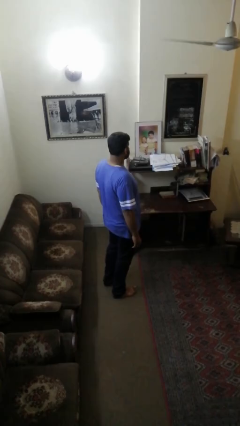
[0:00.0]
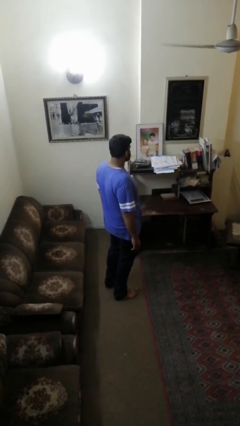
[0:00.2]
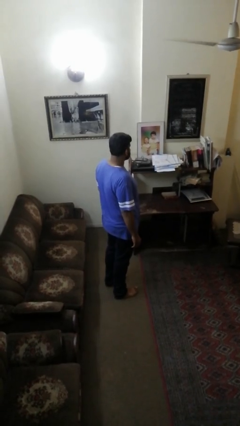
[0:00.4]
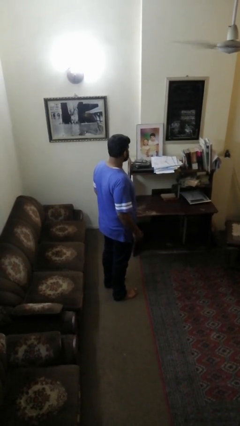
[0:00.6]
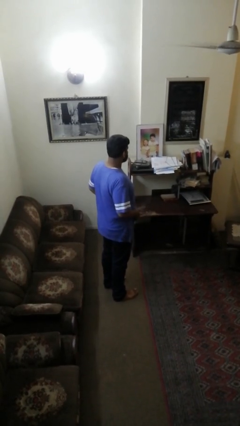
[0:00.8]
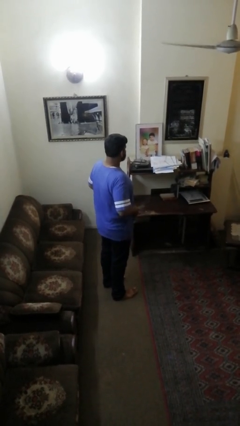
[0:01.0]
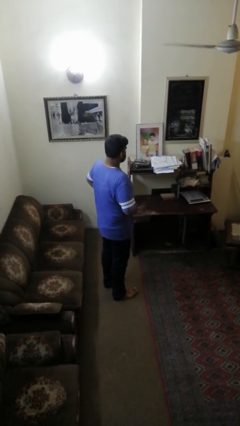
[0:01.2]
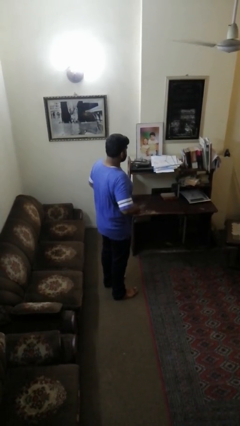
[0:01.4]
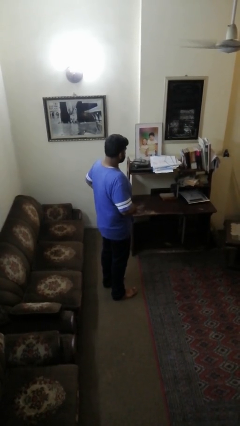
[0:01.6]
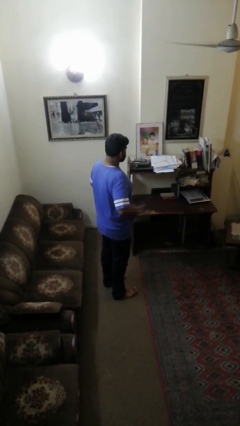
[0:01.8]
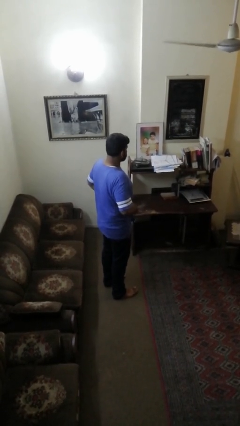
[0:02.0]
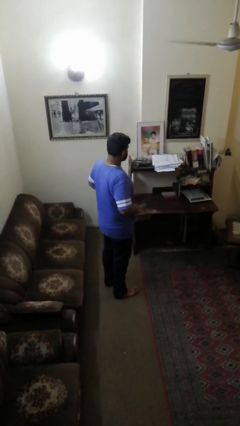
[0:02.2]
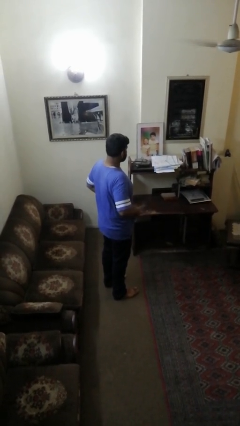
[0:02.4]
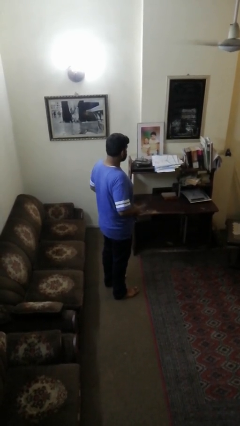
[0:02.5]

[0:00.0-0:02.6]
person hikes up pants

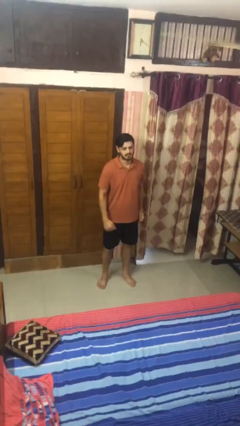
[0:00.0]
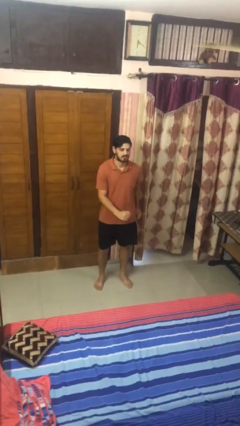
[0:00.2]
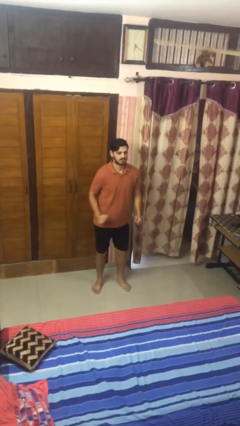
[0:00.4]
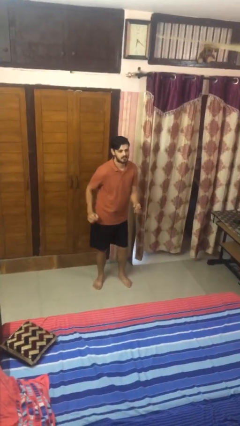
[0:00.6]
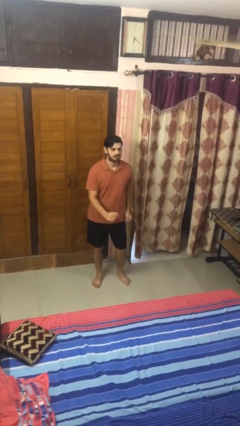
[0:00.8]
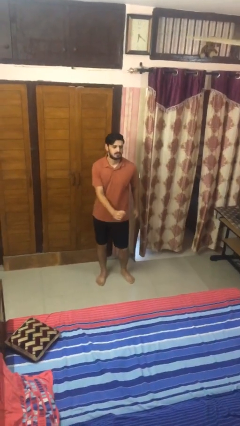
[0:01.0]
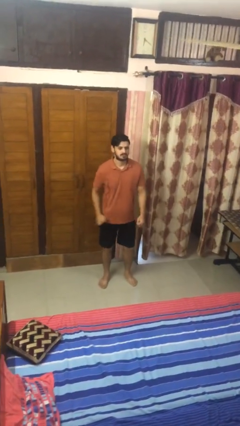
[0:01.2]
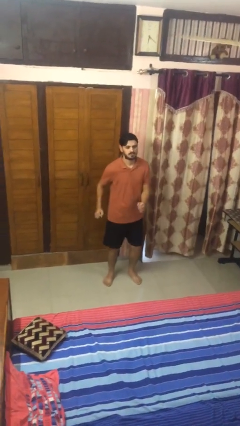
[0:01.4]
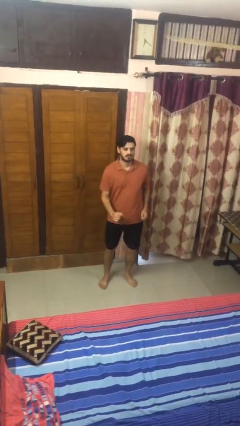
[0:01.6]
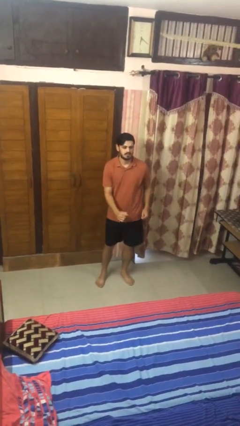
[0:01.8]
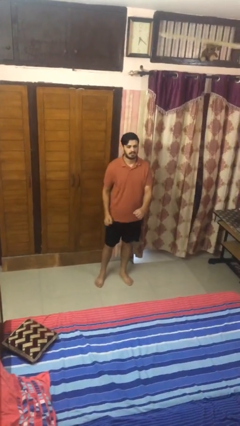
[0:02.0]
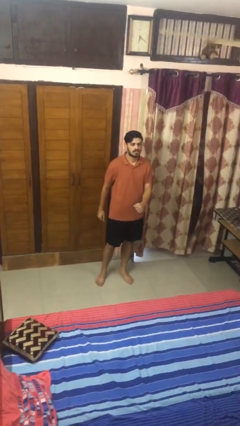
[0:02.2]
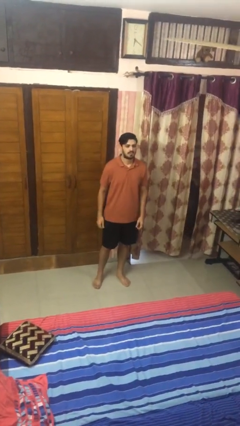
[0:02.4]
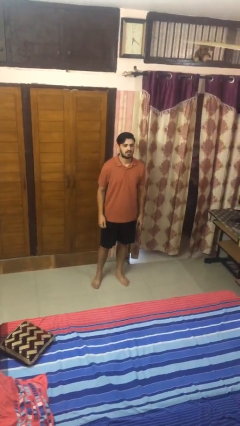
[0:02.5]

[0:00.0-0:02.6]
person dances in place

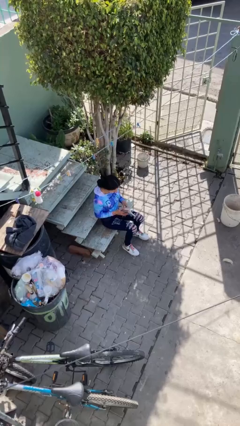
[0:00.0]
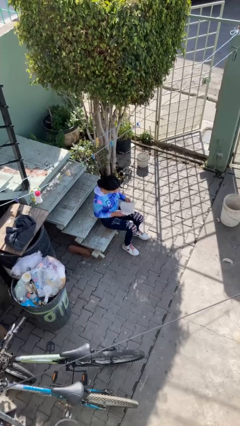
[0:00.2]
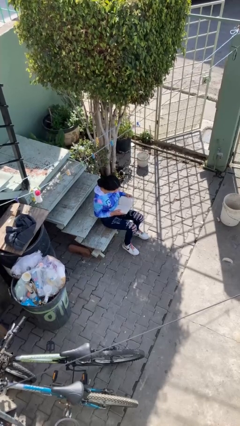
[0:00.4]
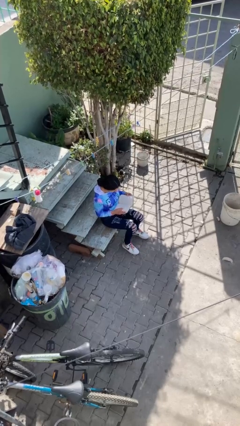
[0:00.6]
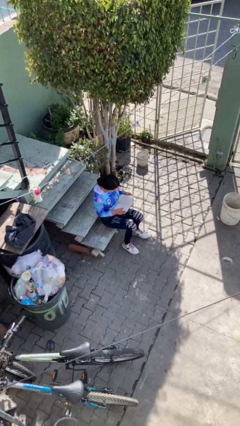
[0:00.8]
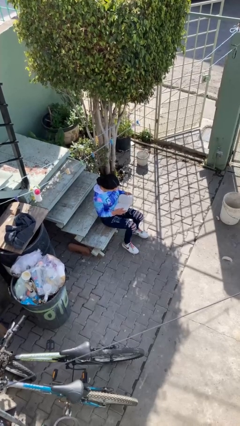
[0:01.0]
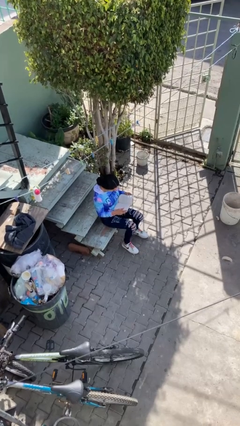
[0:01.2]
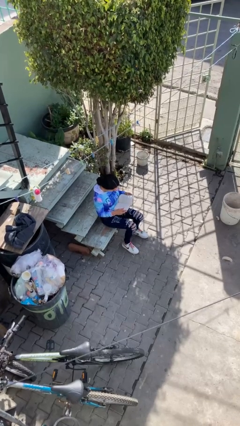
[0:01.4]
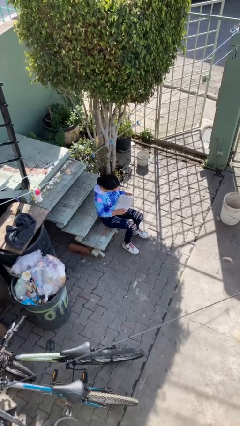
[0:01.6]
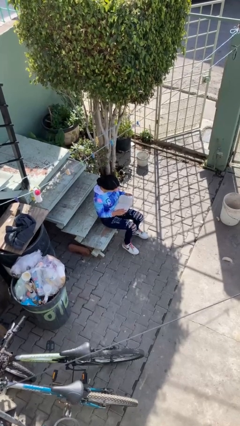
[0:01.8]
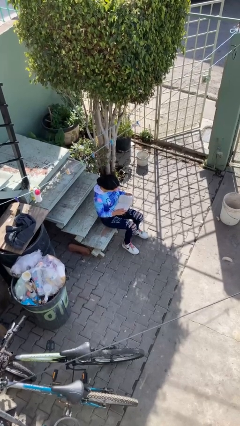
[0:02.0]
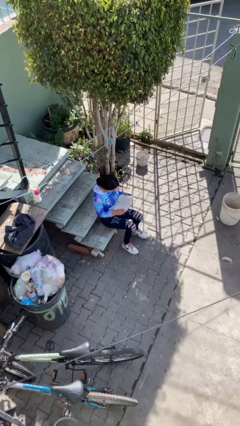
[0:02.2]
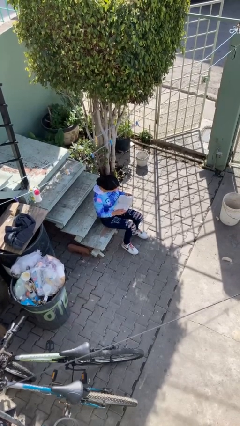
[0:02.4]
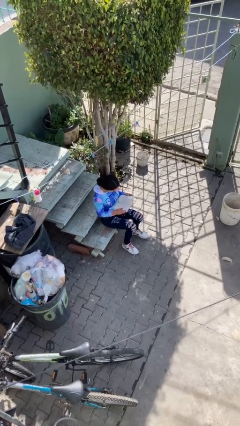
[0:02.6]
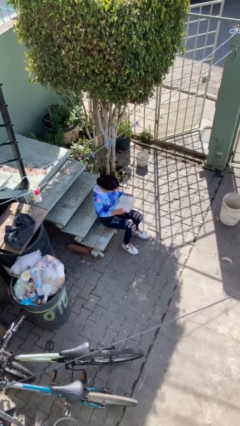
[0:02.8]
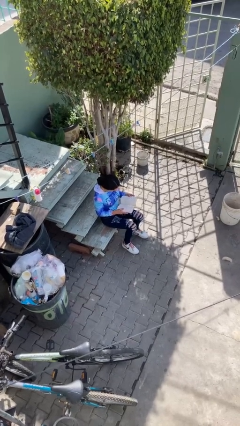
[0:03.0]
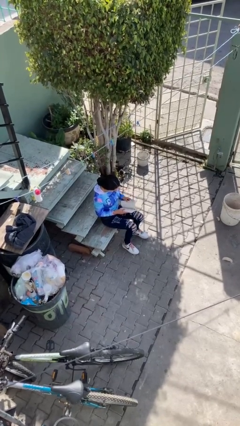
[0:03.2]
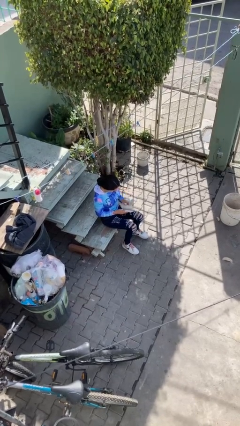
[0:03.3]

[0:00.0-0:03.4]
person reads document

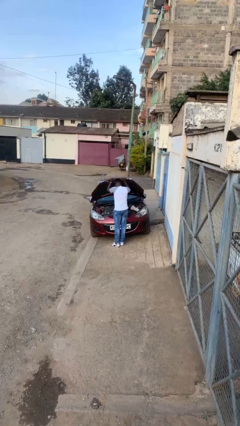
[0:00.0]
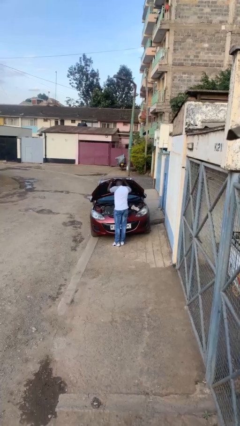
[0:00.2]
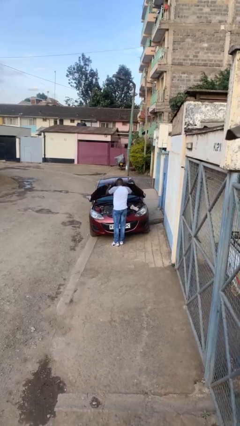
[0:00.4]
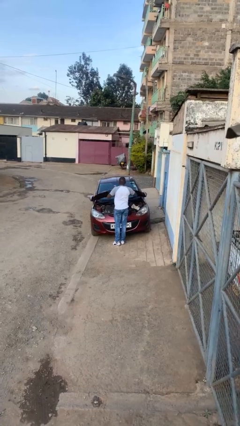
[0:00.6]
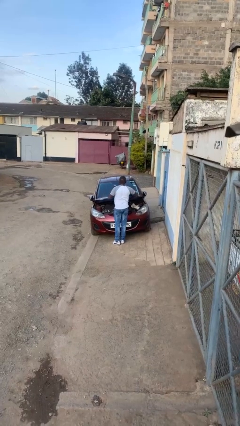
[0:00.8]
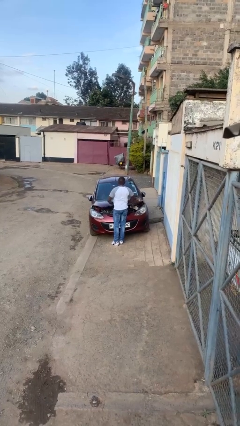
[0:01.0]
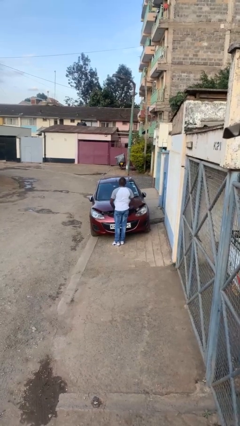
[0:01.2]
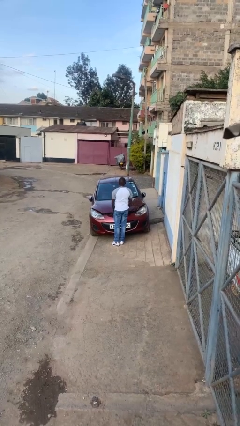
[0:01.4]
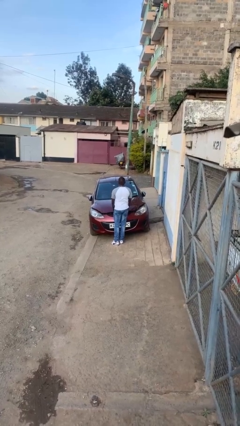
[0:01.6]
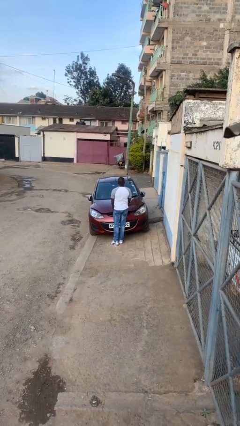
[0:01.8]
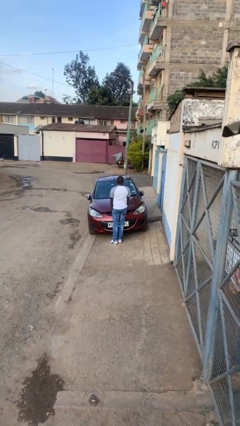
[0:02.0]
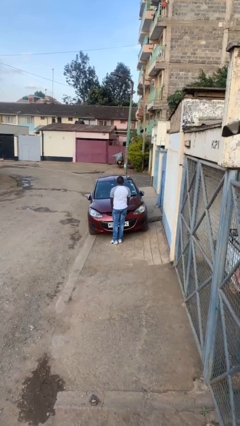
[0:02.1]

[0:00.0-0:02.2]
person closes car hood

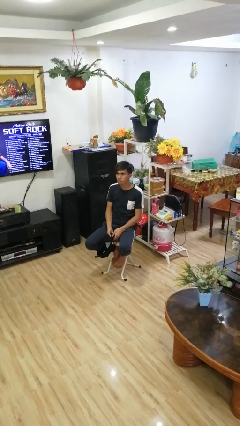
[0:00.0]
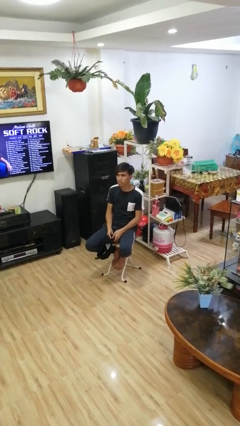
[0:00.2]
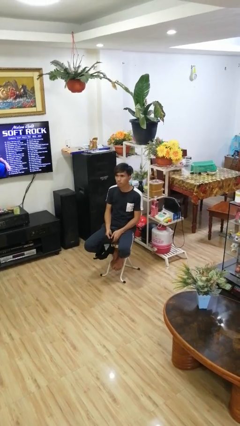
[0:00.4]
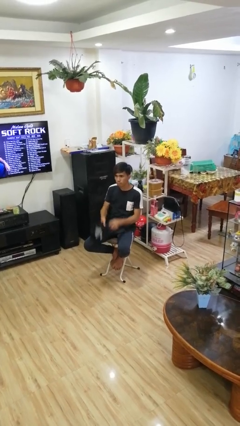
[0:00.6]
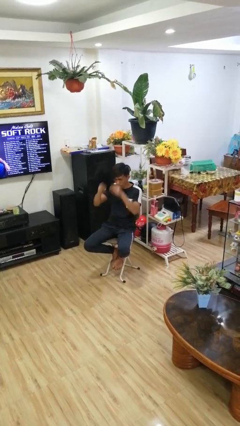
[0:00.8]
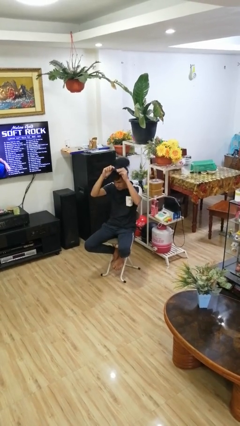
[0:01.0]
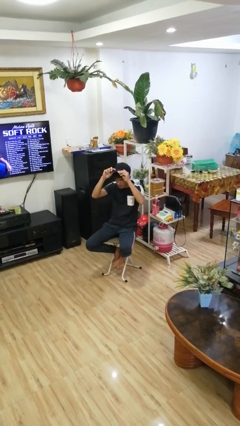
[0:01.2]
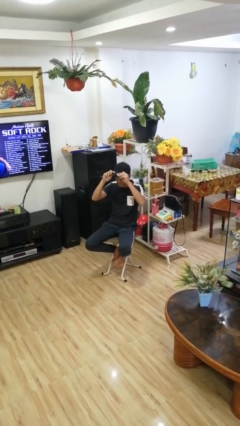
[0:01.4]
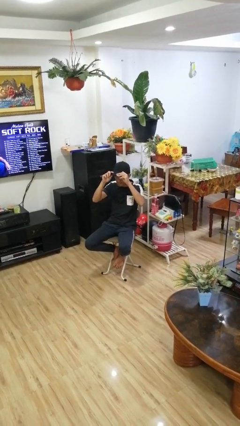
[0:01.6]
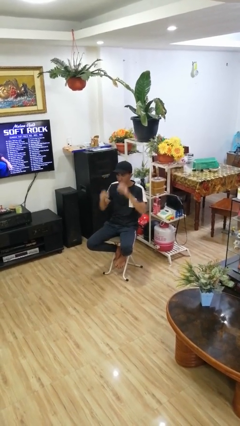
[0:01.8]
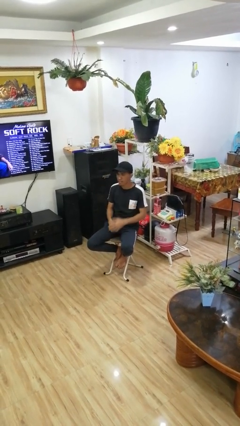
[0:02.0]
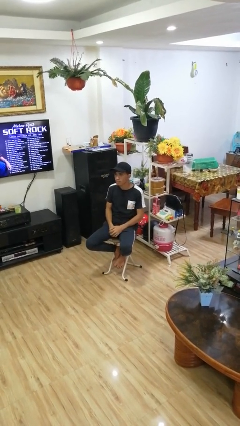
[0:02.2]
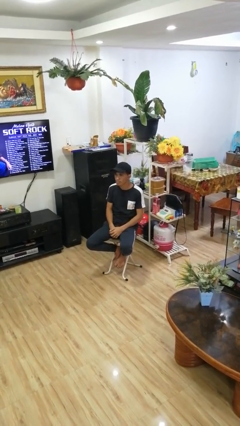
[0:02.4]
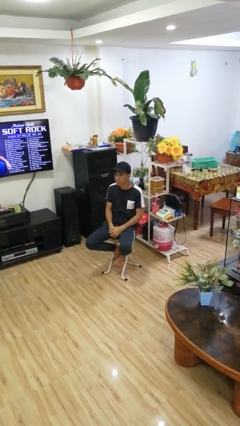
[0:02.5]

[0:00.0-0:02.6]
person puts on hat

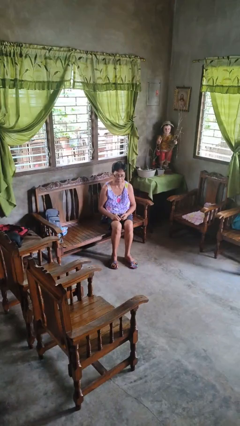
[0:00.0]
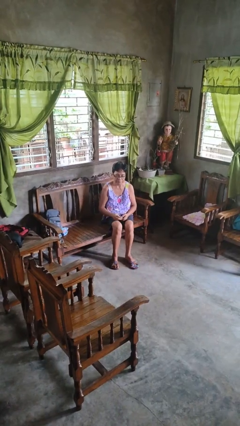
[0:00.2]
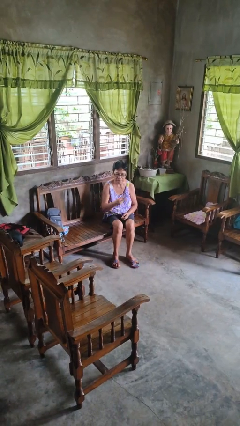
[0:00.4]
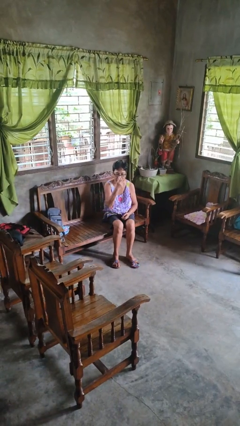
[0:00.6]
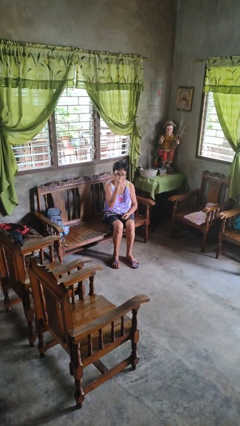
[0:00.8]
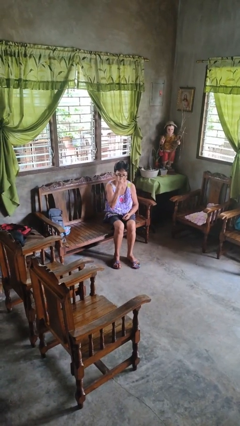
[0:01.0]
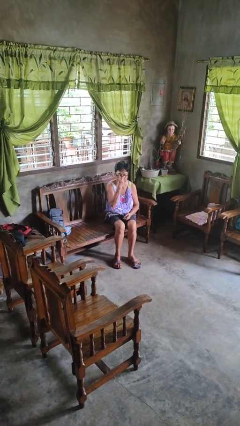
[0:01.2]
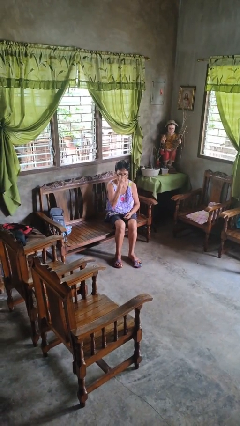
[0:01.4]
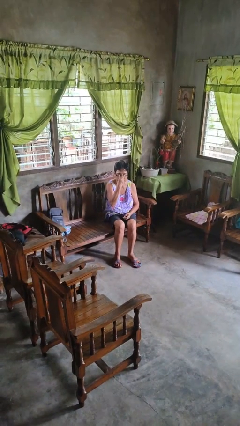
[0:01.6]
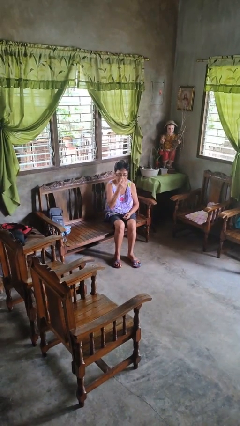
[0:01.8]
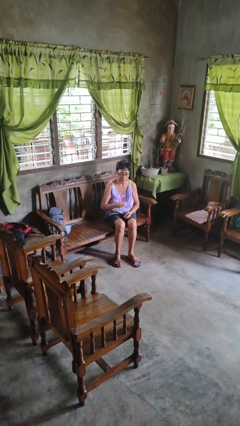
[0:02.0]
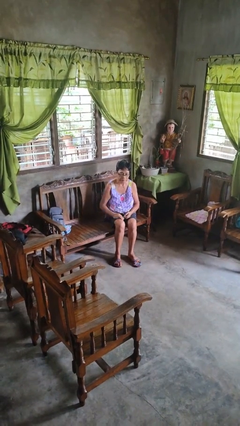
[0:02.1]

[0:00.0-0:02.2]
person gestures watch closely

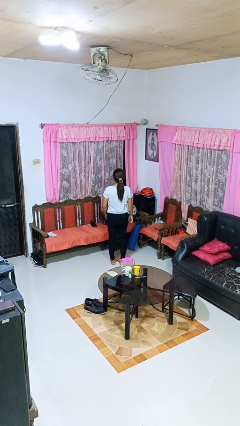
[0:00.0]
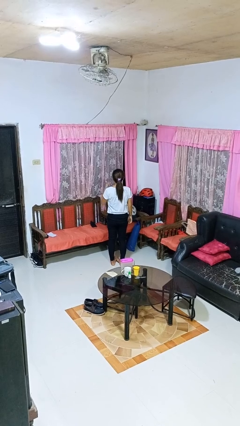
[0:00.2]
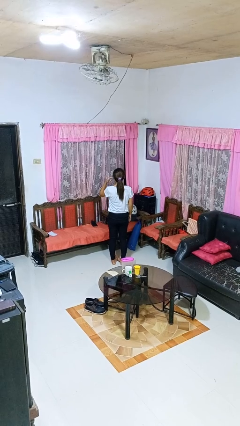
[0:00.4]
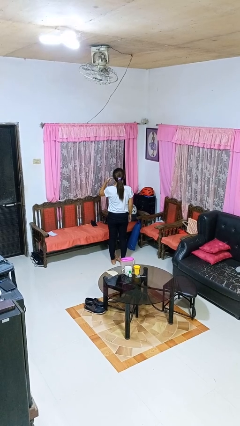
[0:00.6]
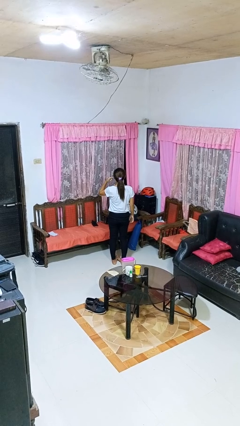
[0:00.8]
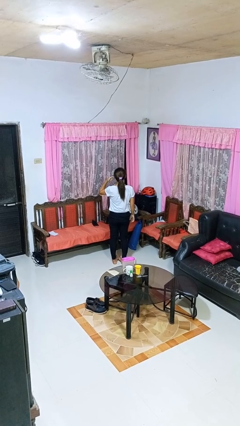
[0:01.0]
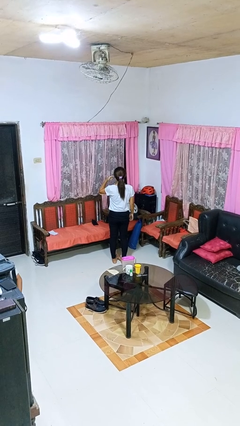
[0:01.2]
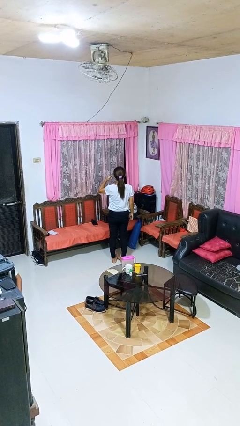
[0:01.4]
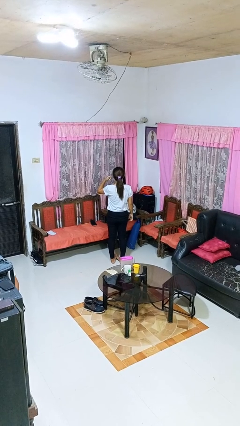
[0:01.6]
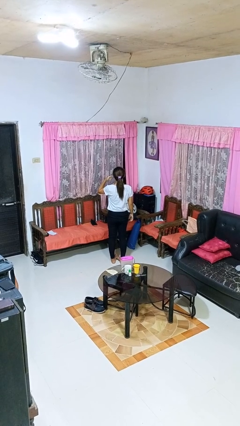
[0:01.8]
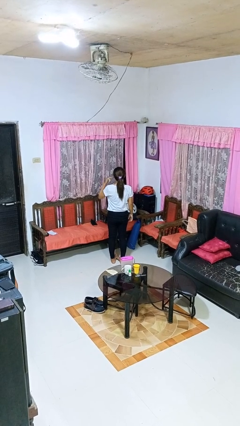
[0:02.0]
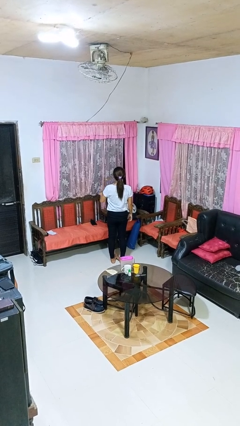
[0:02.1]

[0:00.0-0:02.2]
person gestures listen closely
